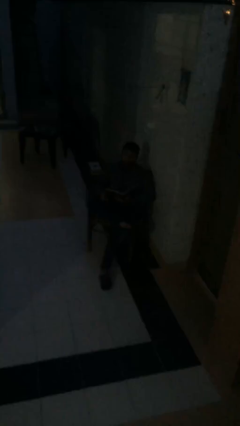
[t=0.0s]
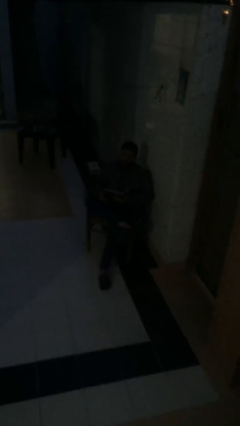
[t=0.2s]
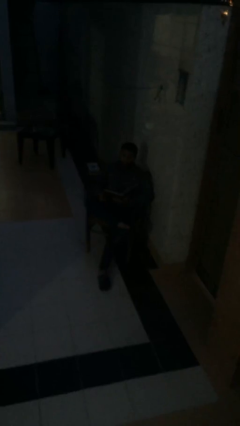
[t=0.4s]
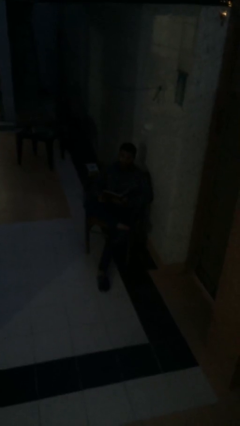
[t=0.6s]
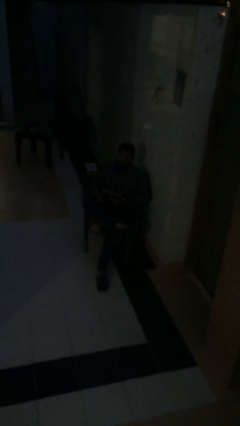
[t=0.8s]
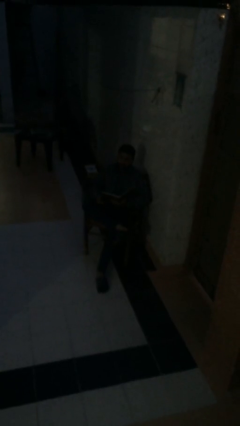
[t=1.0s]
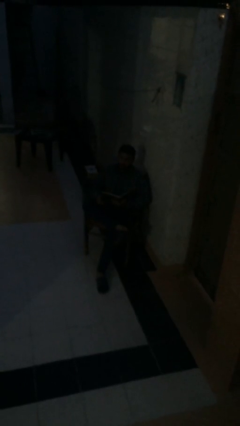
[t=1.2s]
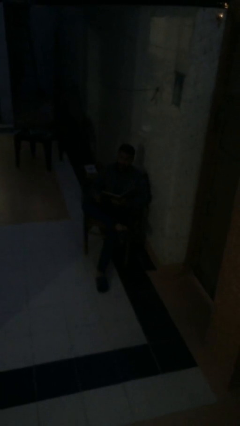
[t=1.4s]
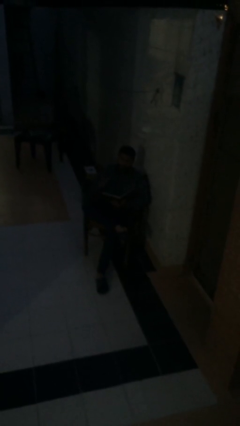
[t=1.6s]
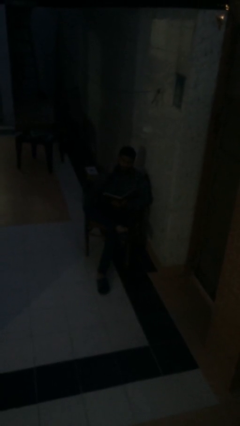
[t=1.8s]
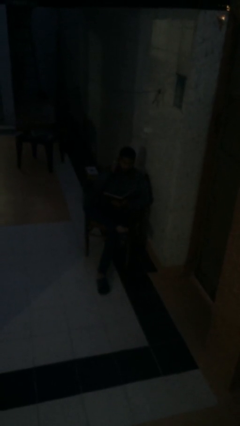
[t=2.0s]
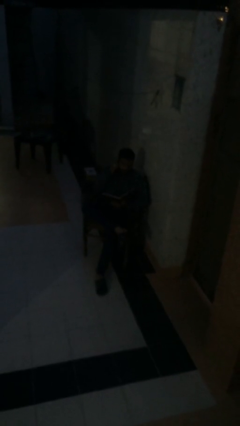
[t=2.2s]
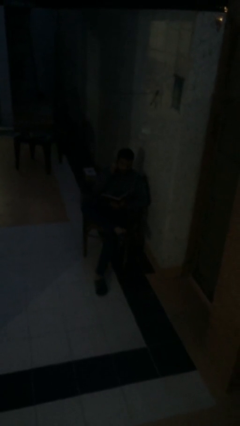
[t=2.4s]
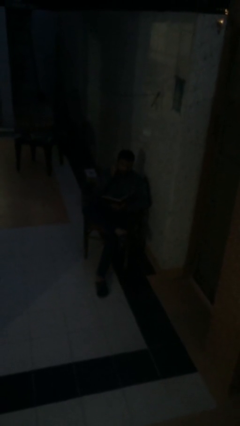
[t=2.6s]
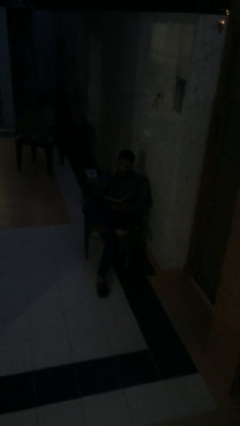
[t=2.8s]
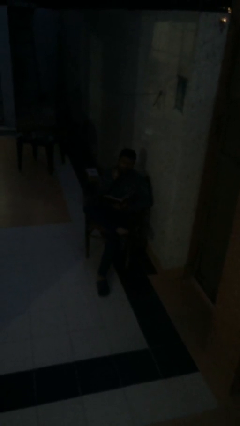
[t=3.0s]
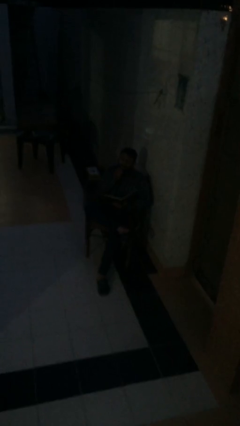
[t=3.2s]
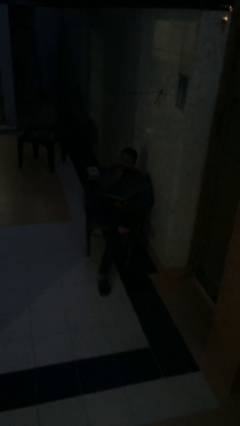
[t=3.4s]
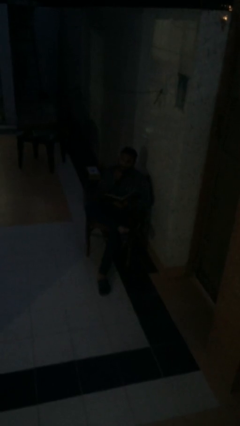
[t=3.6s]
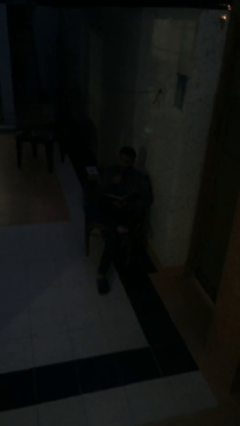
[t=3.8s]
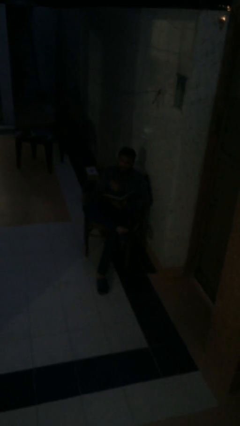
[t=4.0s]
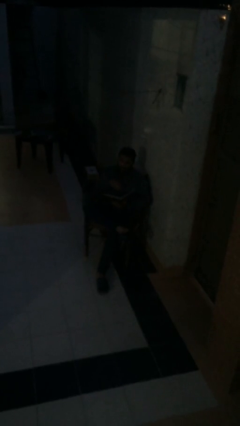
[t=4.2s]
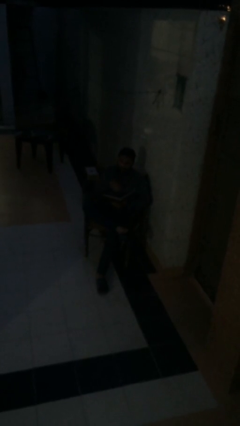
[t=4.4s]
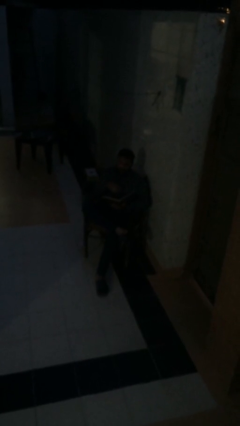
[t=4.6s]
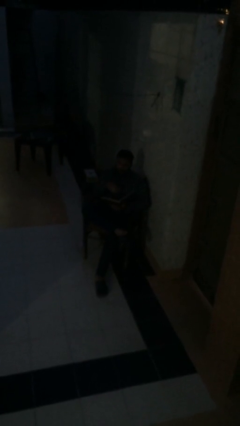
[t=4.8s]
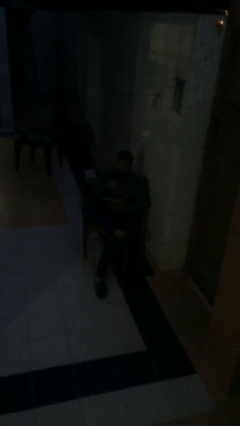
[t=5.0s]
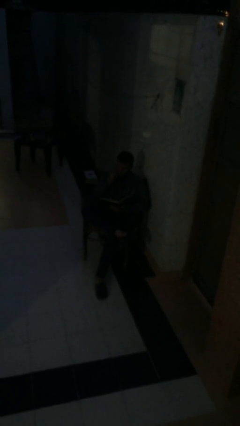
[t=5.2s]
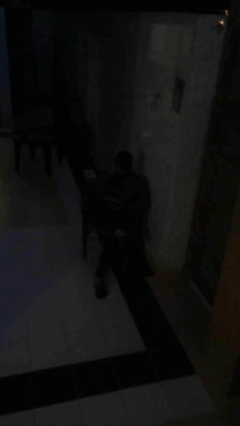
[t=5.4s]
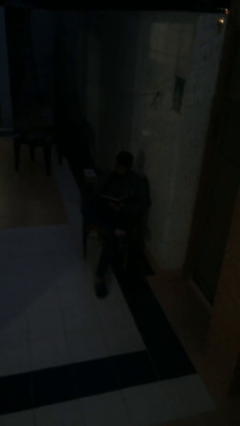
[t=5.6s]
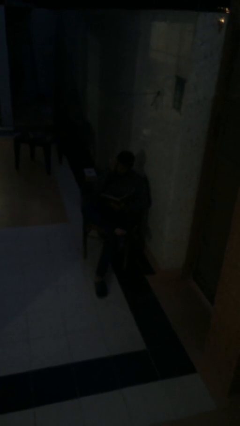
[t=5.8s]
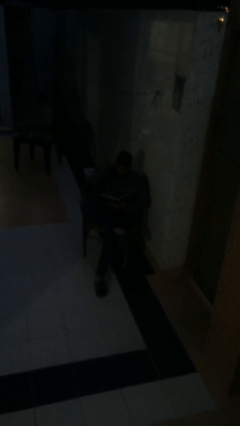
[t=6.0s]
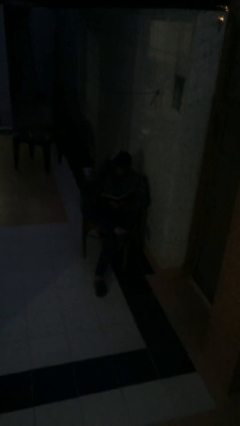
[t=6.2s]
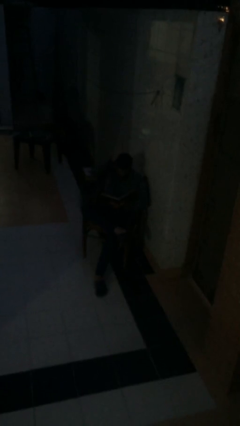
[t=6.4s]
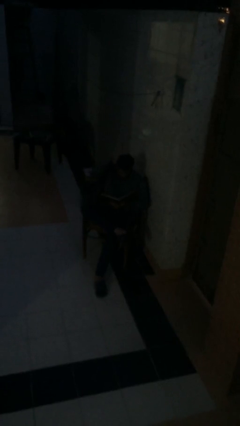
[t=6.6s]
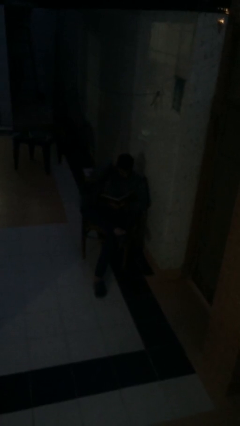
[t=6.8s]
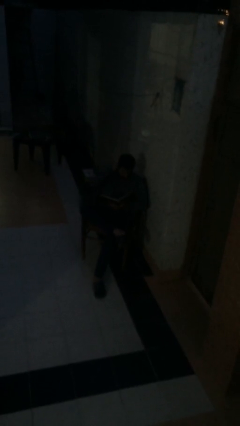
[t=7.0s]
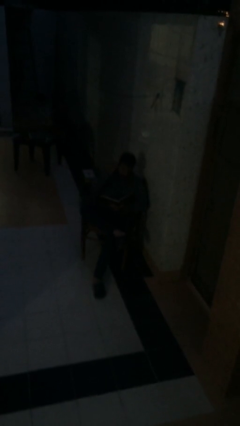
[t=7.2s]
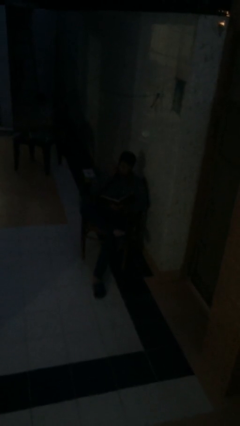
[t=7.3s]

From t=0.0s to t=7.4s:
person reads document

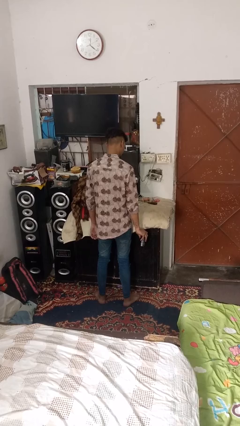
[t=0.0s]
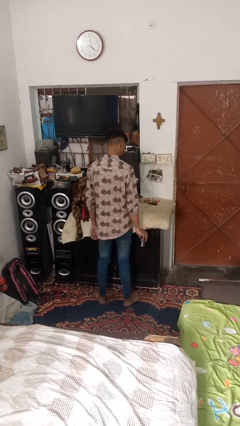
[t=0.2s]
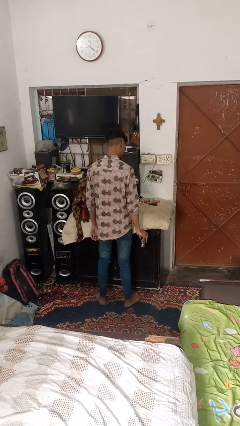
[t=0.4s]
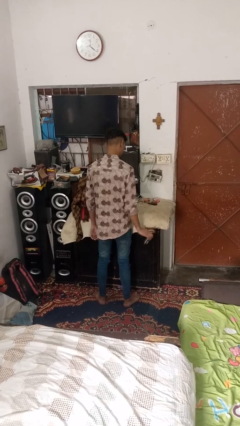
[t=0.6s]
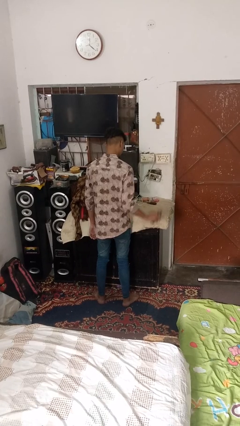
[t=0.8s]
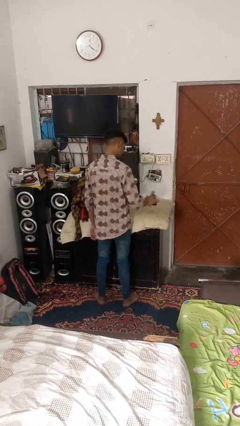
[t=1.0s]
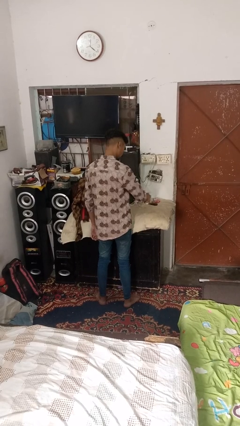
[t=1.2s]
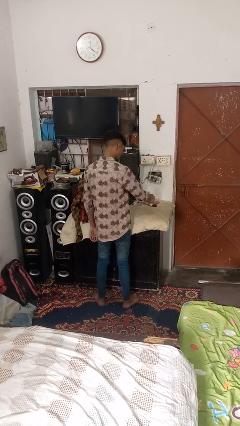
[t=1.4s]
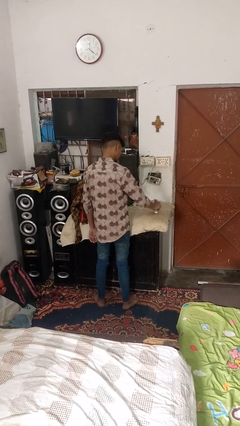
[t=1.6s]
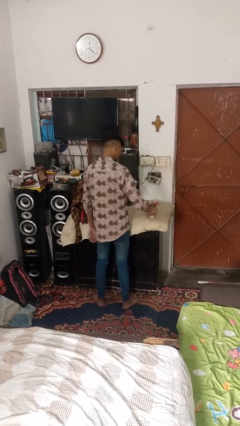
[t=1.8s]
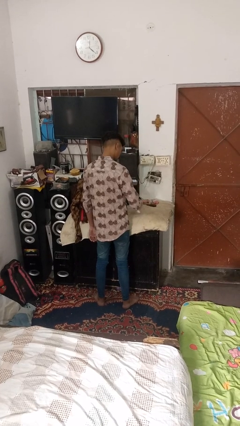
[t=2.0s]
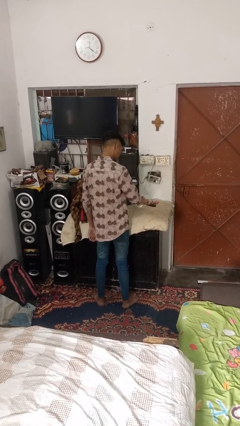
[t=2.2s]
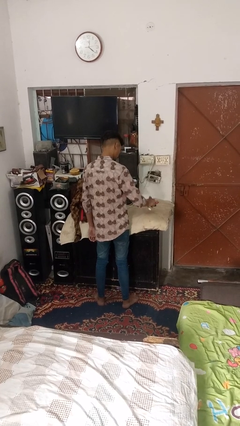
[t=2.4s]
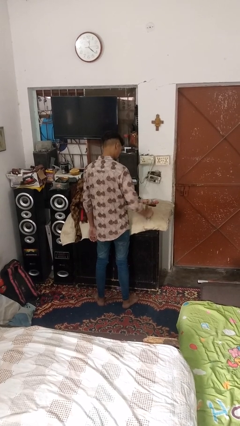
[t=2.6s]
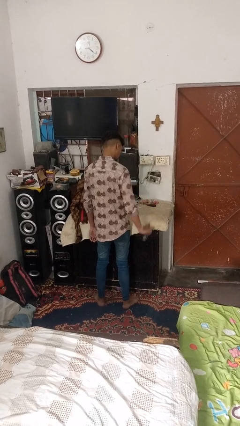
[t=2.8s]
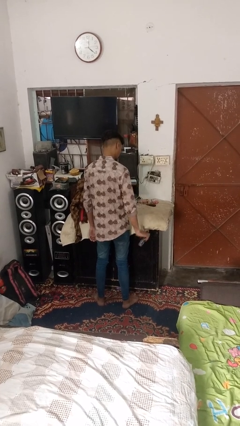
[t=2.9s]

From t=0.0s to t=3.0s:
person sprays from bottle

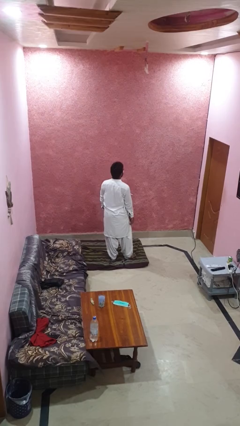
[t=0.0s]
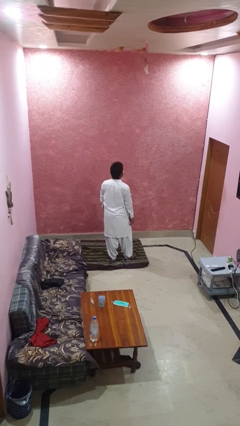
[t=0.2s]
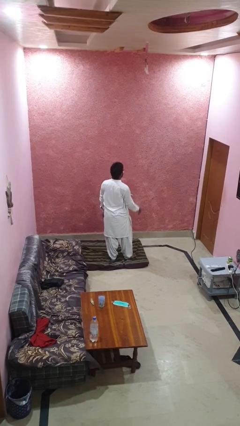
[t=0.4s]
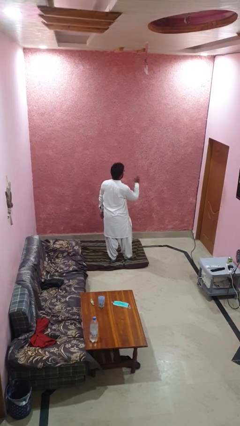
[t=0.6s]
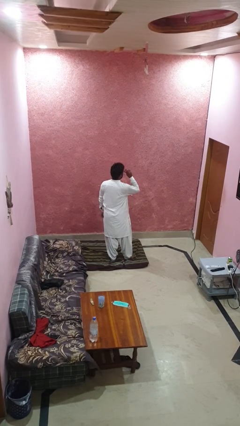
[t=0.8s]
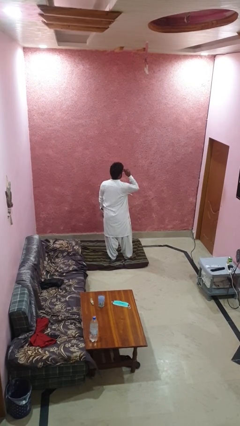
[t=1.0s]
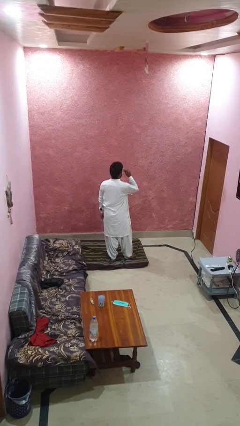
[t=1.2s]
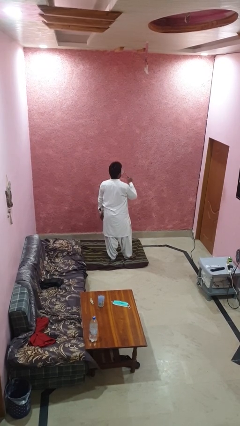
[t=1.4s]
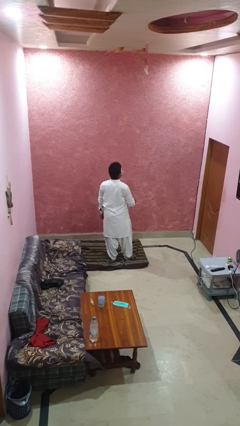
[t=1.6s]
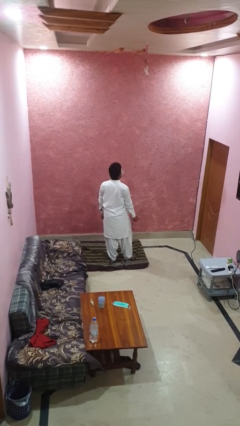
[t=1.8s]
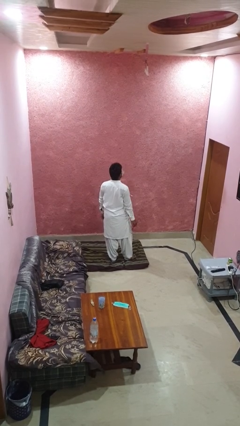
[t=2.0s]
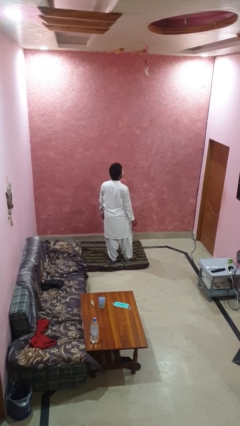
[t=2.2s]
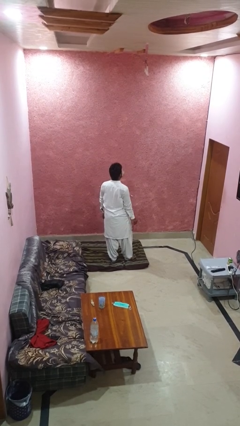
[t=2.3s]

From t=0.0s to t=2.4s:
person takes off glasses

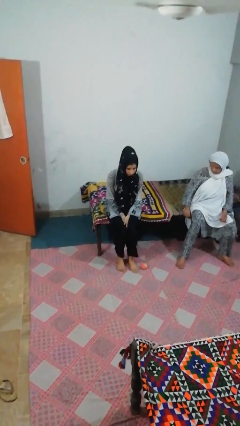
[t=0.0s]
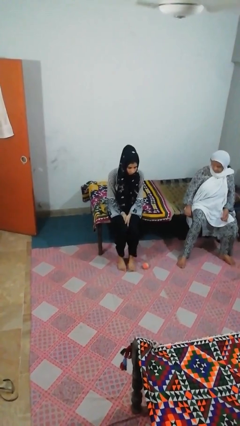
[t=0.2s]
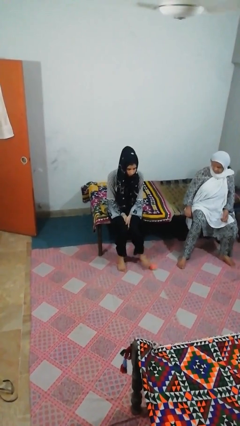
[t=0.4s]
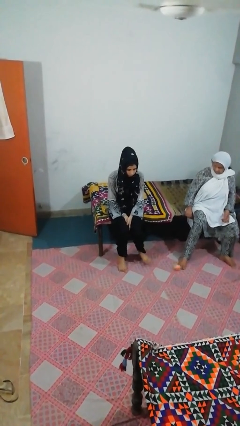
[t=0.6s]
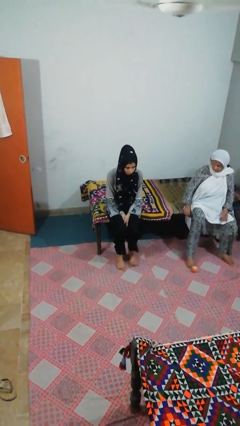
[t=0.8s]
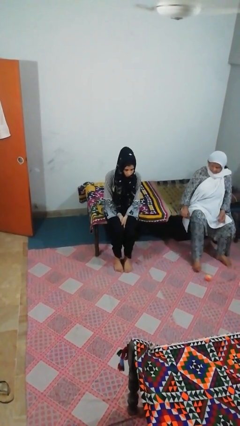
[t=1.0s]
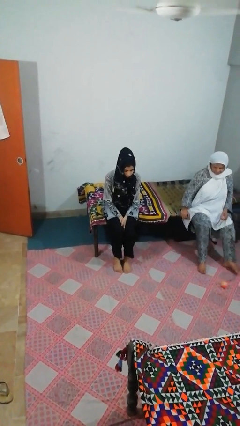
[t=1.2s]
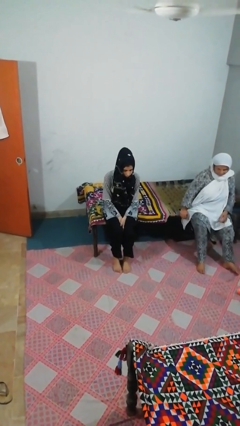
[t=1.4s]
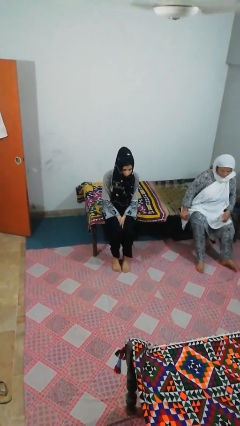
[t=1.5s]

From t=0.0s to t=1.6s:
person kicks object to person

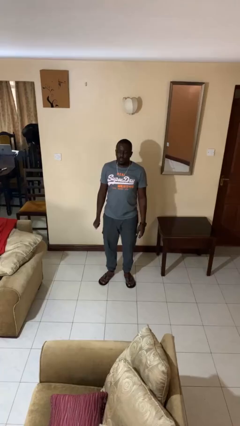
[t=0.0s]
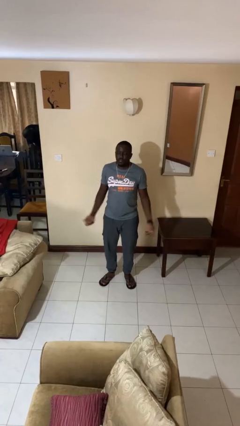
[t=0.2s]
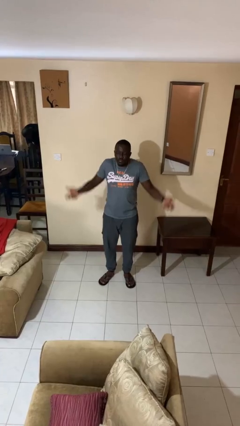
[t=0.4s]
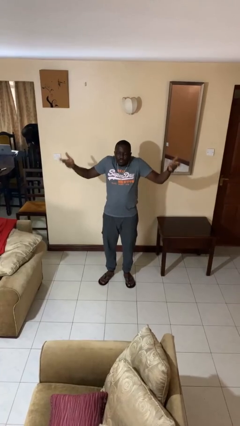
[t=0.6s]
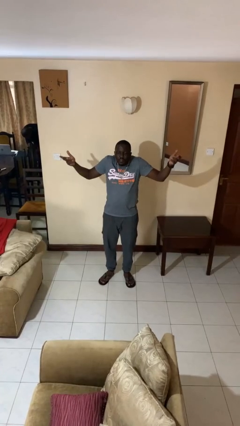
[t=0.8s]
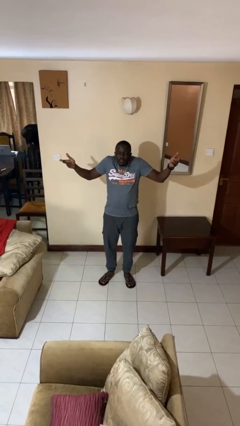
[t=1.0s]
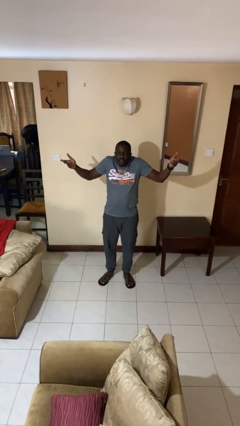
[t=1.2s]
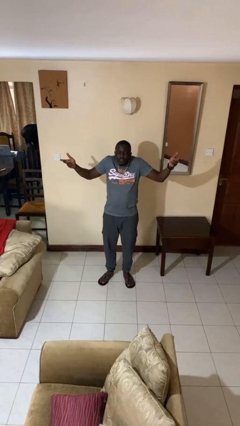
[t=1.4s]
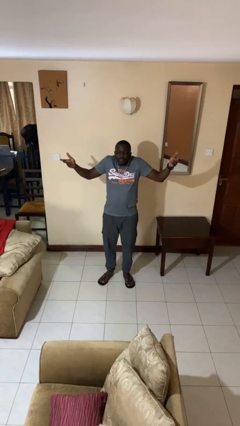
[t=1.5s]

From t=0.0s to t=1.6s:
person shrugs

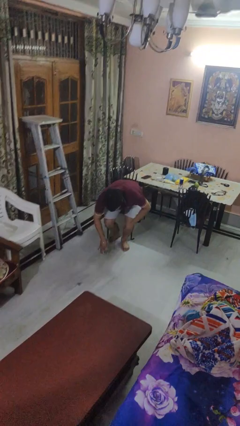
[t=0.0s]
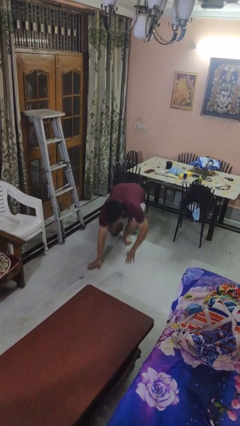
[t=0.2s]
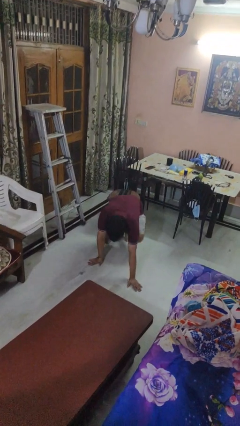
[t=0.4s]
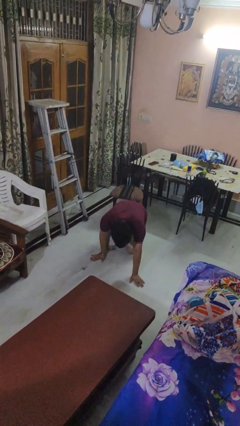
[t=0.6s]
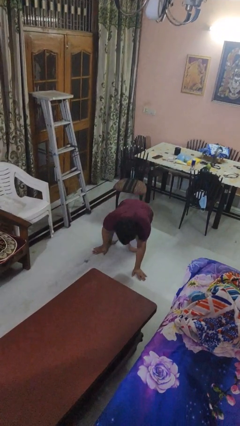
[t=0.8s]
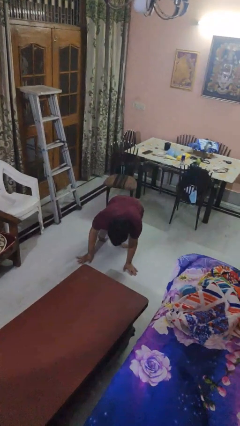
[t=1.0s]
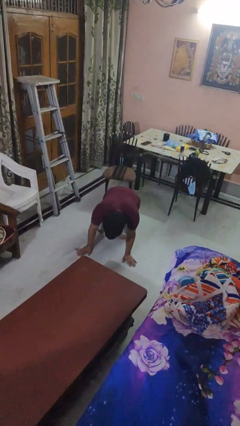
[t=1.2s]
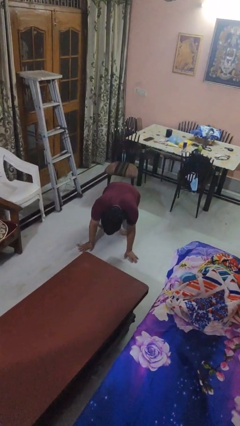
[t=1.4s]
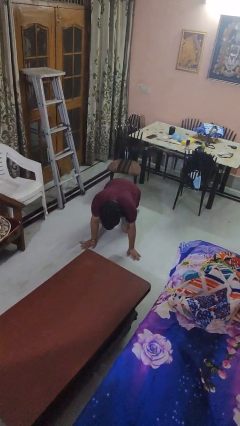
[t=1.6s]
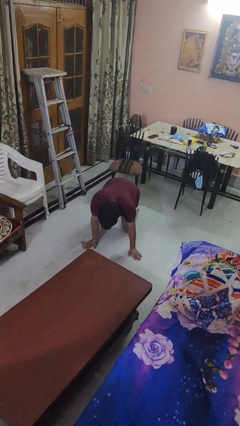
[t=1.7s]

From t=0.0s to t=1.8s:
person falls while standing
